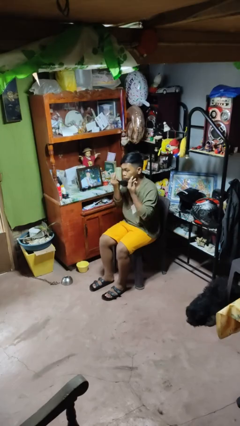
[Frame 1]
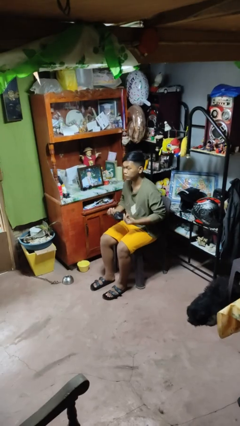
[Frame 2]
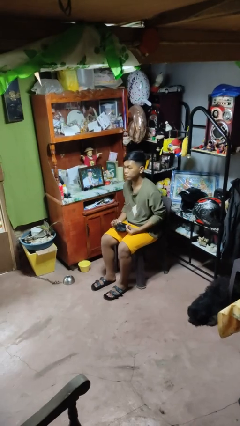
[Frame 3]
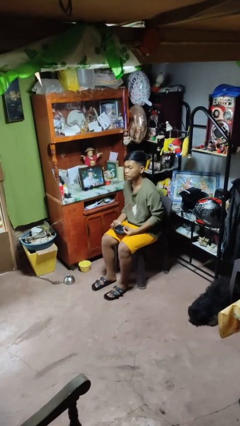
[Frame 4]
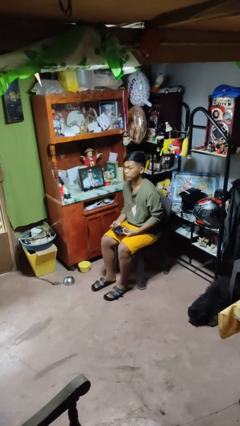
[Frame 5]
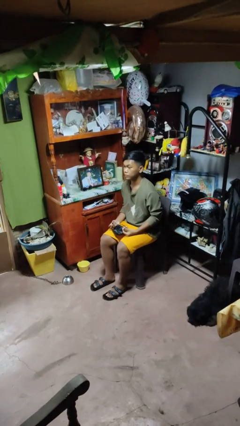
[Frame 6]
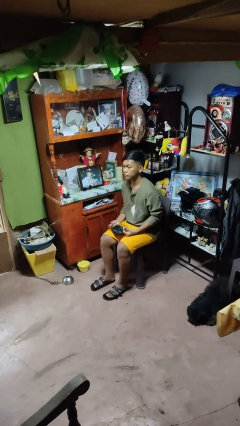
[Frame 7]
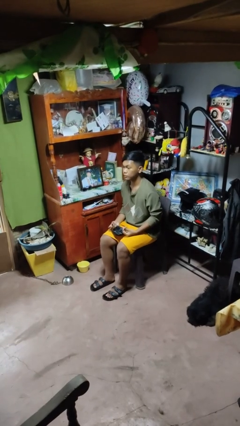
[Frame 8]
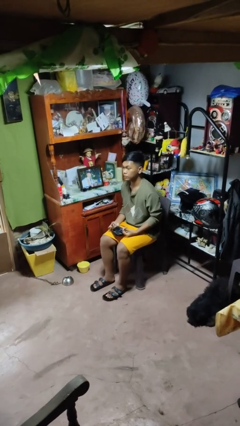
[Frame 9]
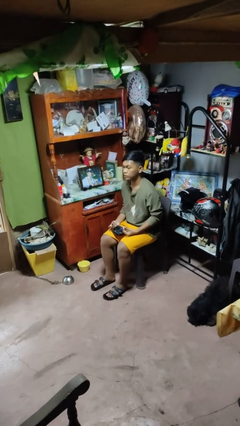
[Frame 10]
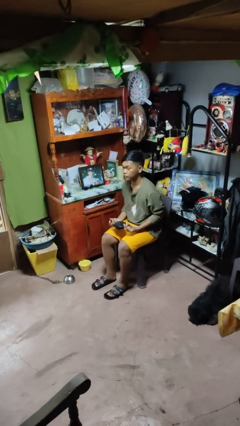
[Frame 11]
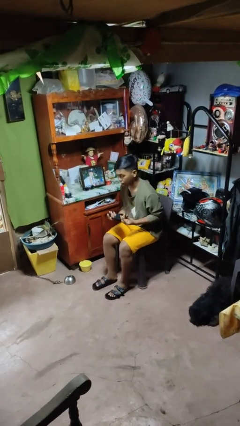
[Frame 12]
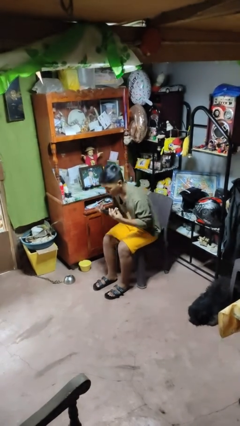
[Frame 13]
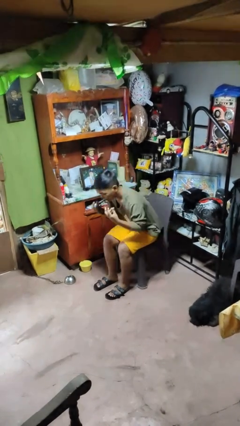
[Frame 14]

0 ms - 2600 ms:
person takes off facemask

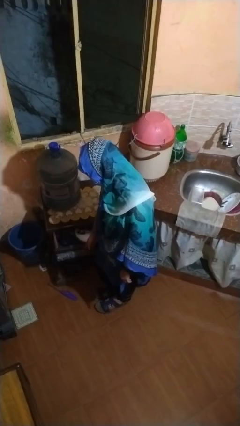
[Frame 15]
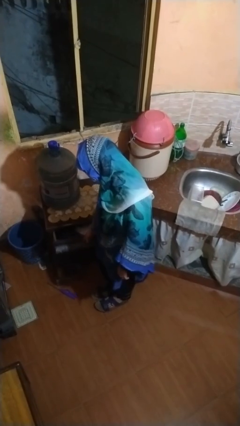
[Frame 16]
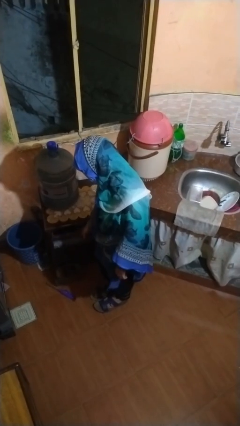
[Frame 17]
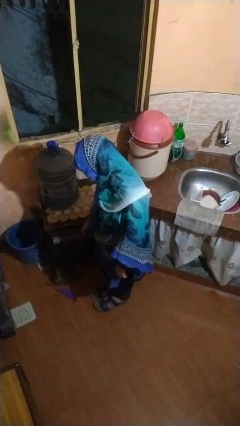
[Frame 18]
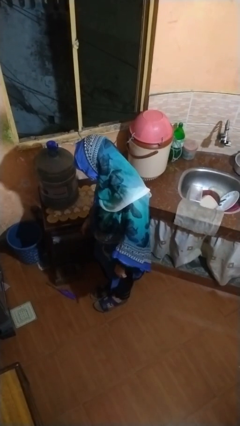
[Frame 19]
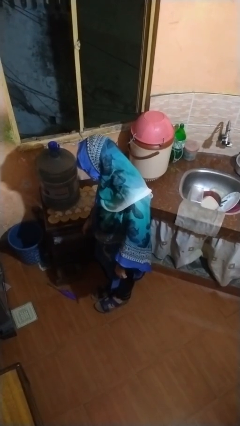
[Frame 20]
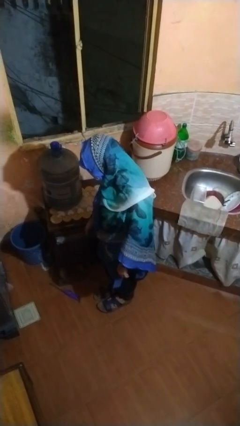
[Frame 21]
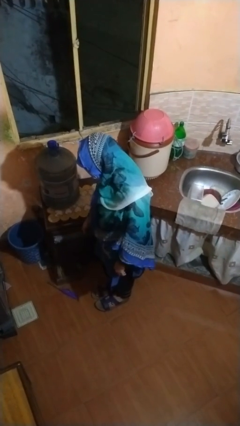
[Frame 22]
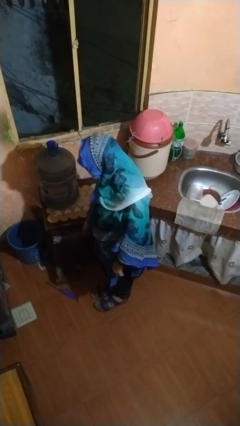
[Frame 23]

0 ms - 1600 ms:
person closes kitchen drawer

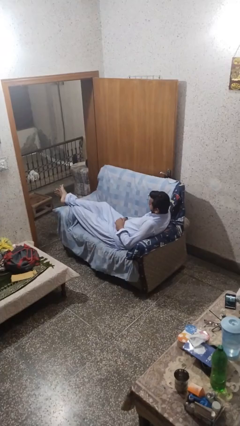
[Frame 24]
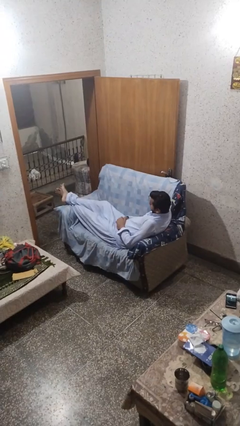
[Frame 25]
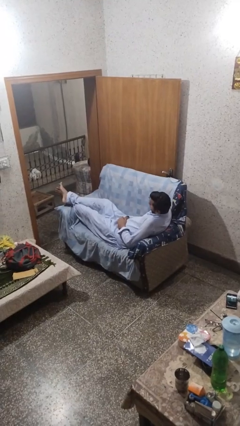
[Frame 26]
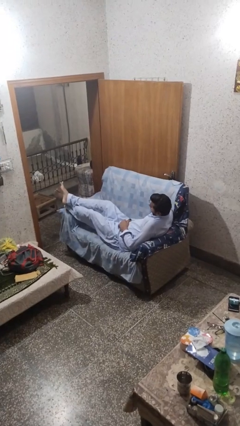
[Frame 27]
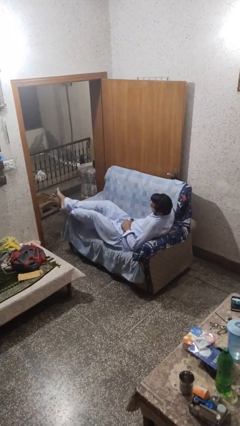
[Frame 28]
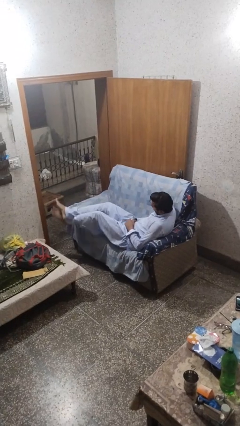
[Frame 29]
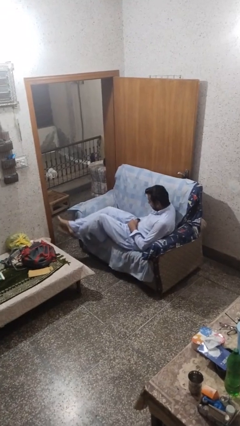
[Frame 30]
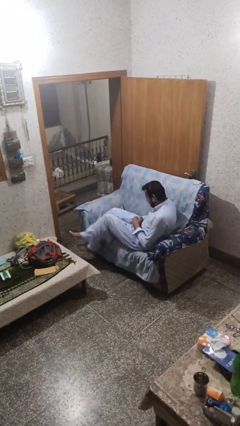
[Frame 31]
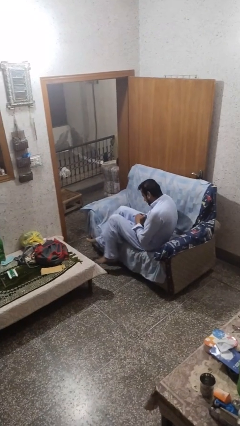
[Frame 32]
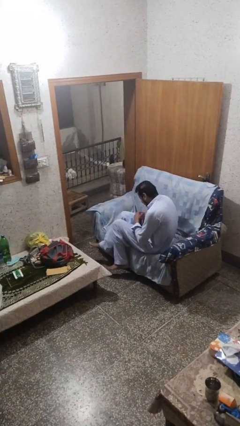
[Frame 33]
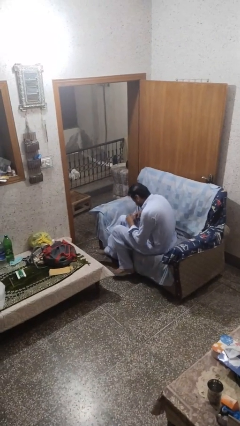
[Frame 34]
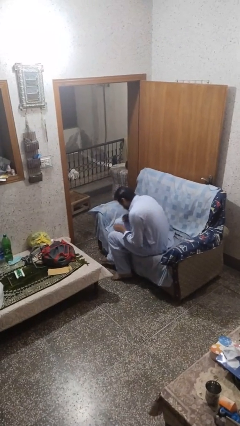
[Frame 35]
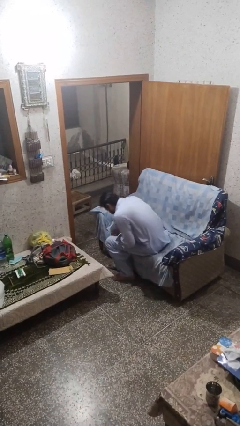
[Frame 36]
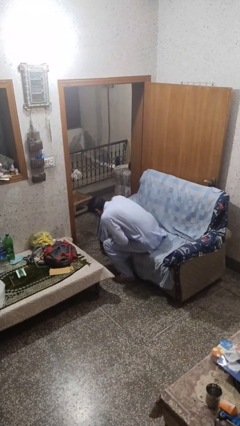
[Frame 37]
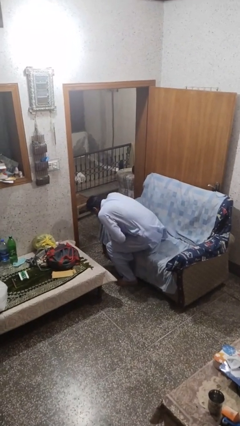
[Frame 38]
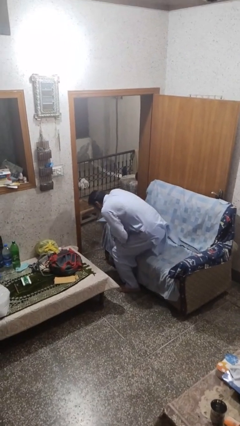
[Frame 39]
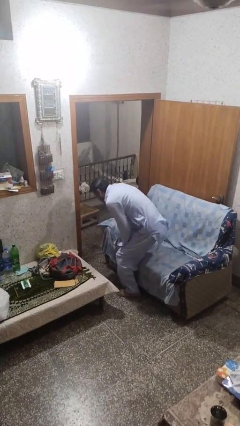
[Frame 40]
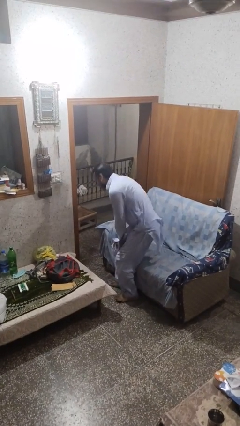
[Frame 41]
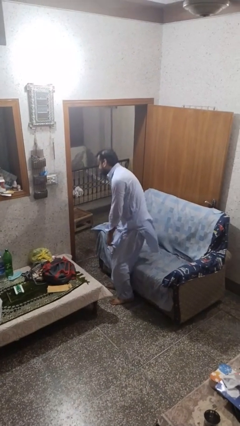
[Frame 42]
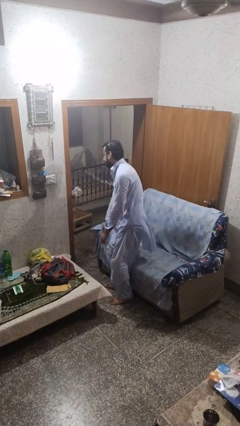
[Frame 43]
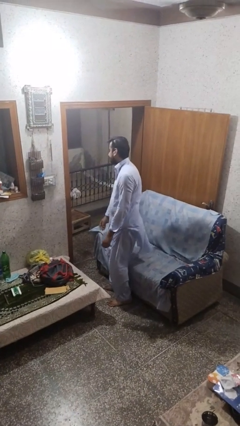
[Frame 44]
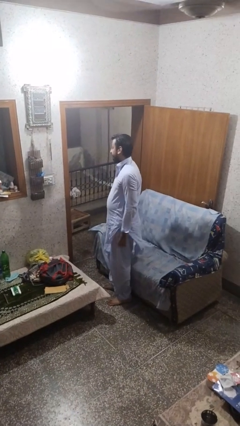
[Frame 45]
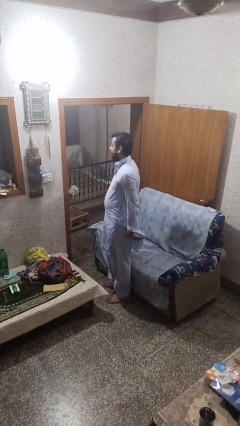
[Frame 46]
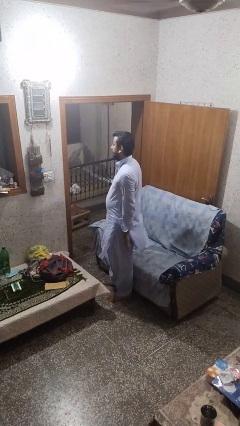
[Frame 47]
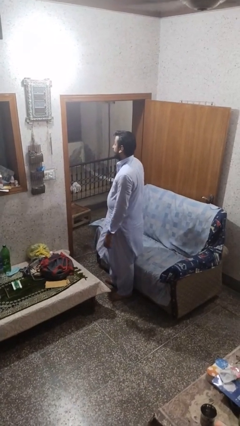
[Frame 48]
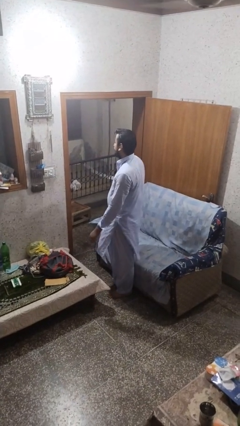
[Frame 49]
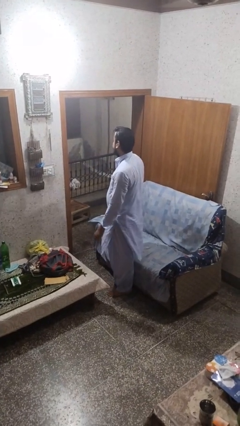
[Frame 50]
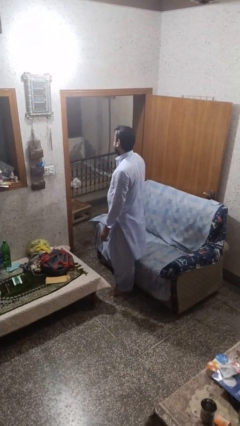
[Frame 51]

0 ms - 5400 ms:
person stands up

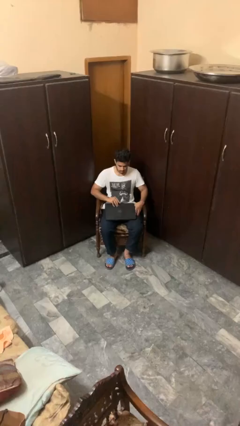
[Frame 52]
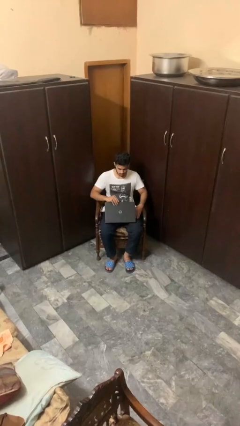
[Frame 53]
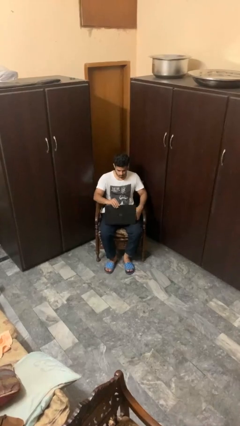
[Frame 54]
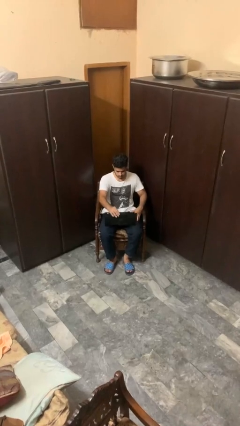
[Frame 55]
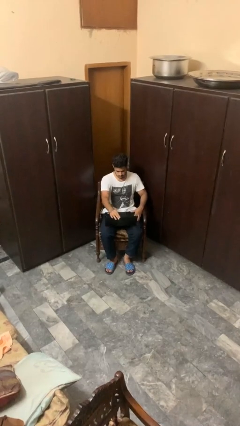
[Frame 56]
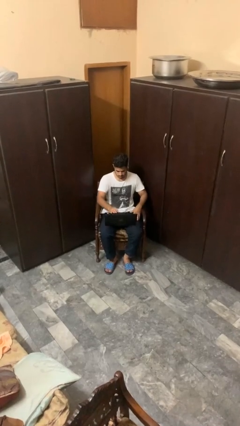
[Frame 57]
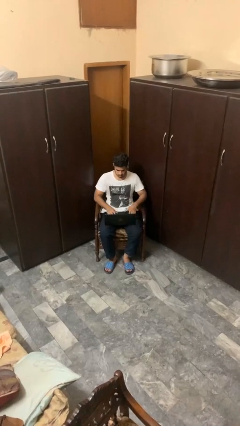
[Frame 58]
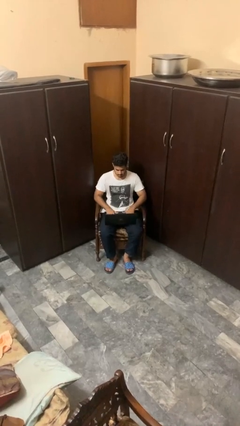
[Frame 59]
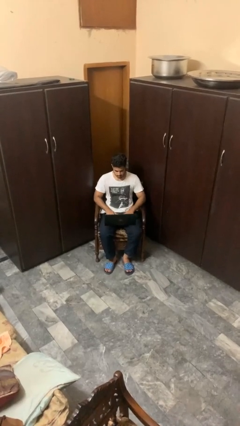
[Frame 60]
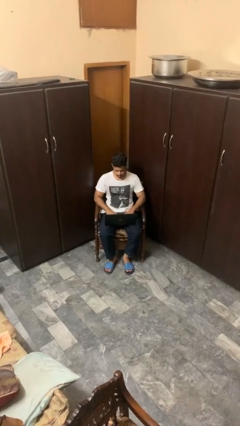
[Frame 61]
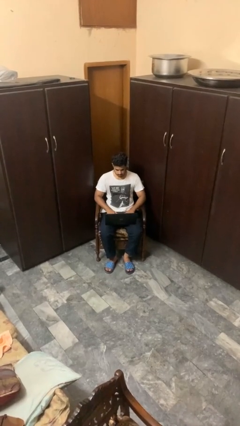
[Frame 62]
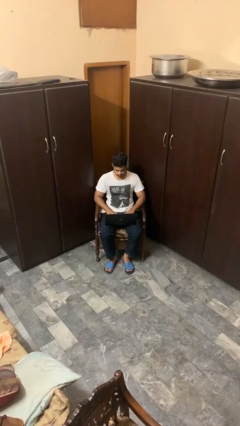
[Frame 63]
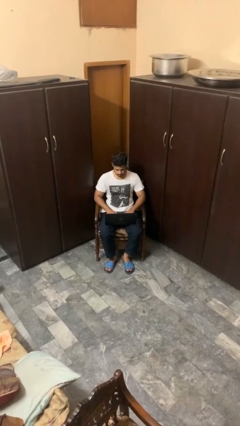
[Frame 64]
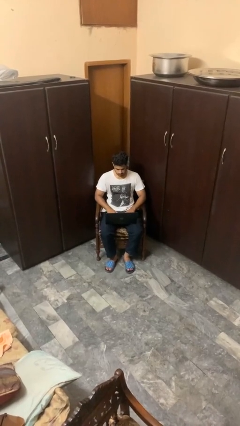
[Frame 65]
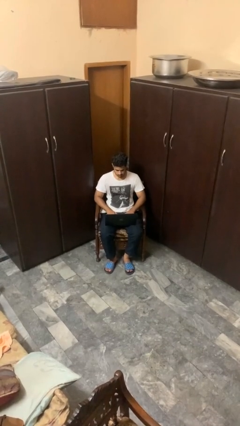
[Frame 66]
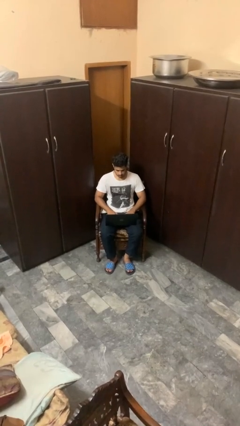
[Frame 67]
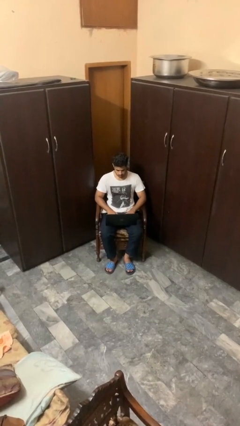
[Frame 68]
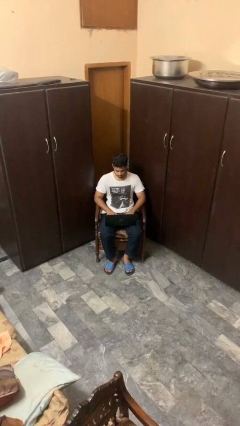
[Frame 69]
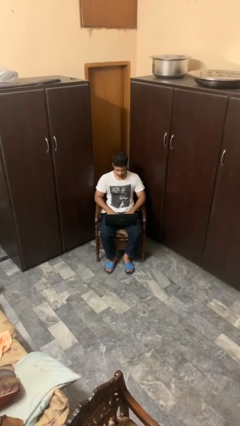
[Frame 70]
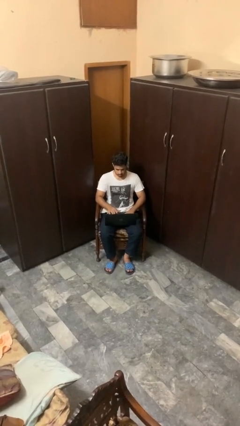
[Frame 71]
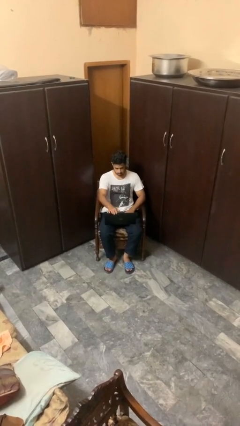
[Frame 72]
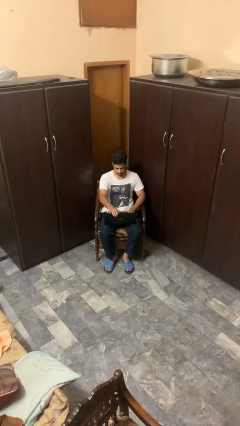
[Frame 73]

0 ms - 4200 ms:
person opens laptop

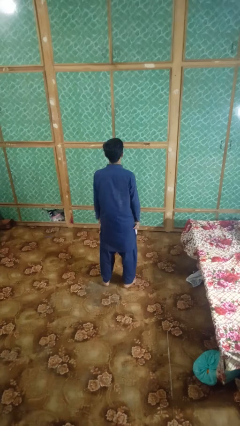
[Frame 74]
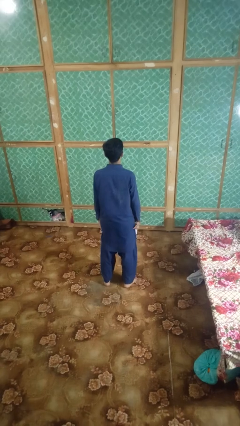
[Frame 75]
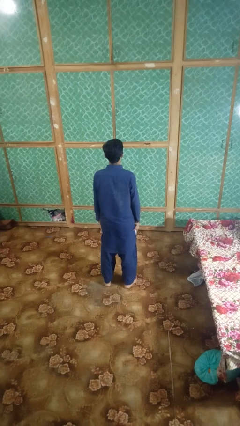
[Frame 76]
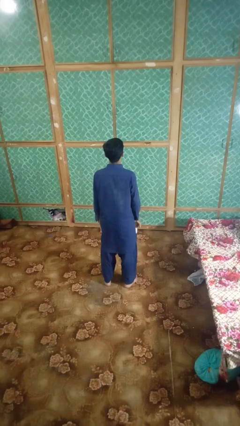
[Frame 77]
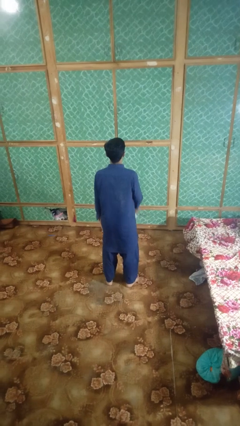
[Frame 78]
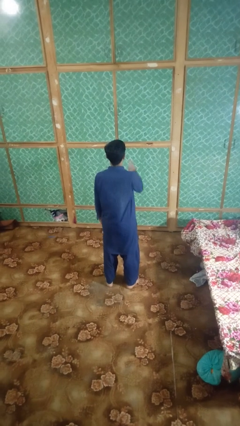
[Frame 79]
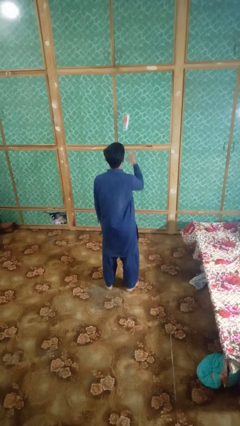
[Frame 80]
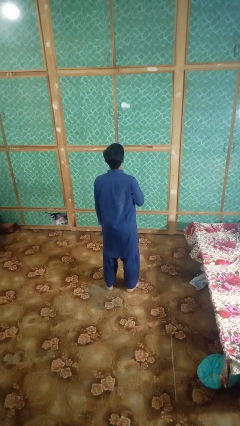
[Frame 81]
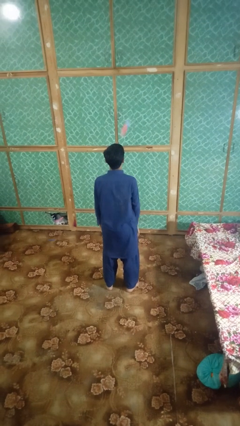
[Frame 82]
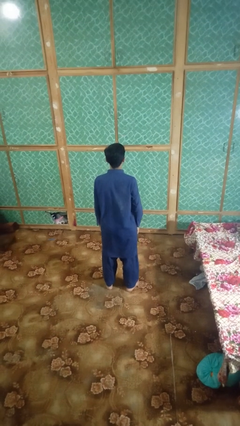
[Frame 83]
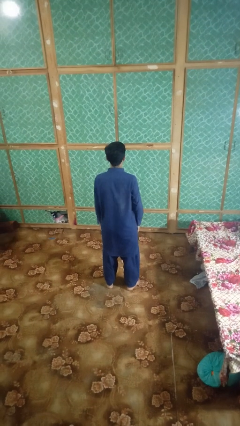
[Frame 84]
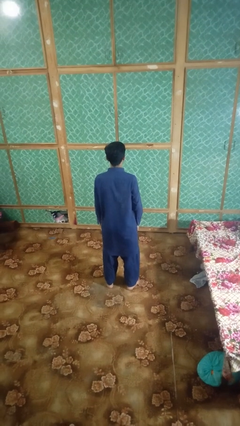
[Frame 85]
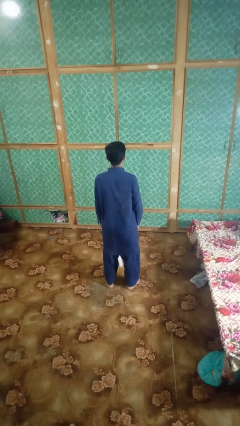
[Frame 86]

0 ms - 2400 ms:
person throws object into air

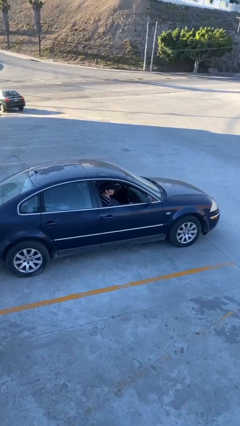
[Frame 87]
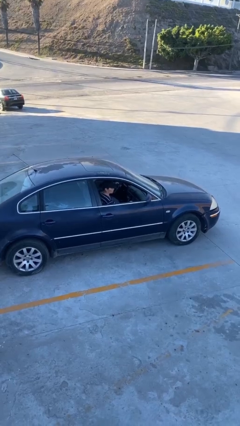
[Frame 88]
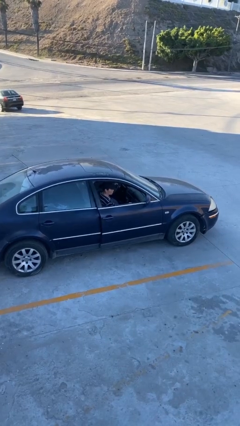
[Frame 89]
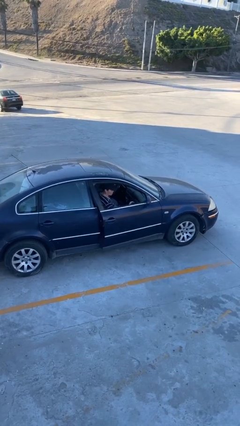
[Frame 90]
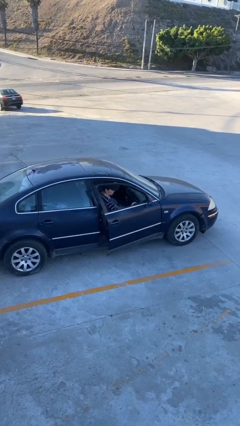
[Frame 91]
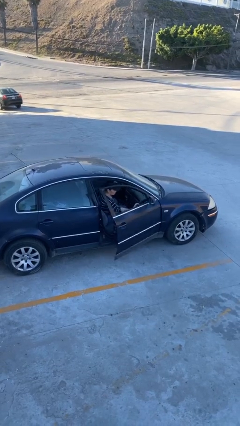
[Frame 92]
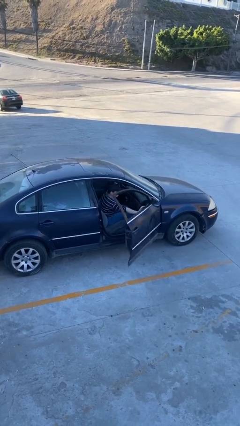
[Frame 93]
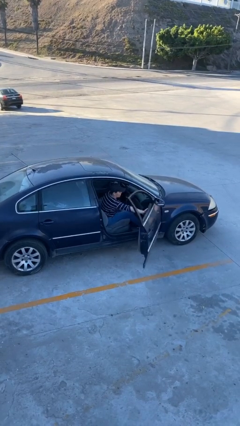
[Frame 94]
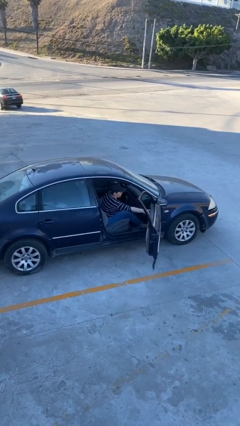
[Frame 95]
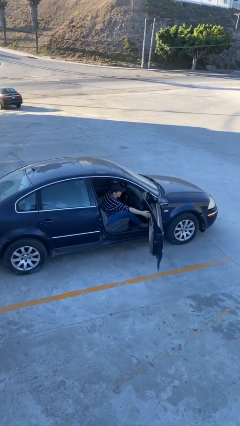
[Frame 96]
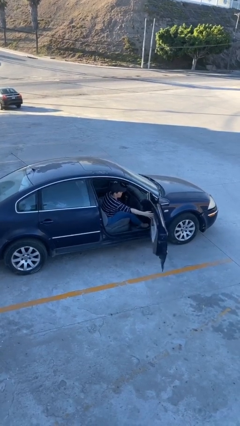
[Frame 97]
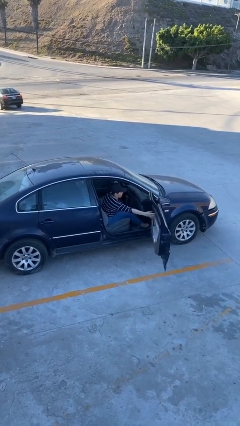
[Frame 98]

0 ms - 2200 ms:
person opens car door
